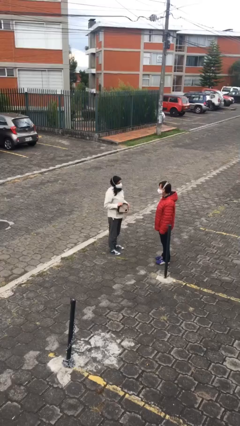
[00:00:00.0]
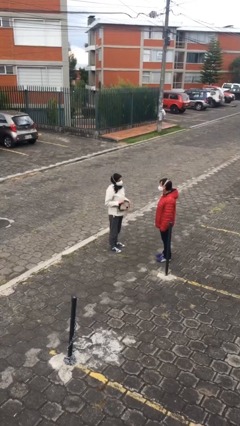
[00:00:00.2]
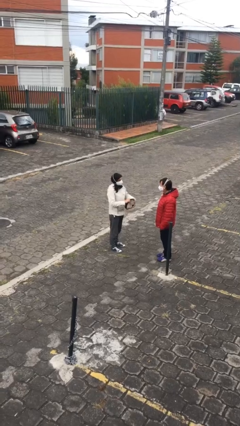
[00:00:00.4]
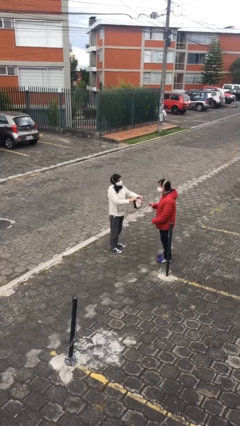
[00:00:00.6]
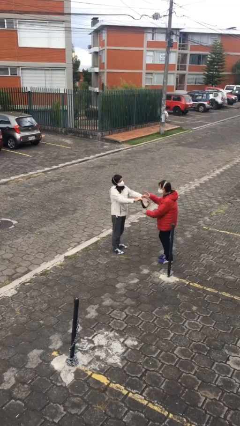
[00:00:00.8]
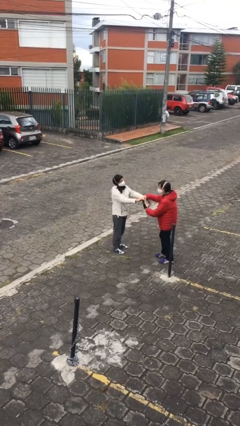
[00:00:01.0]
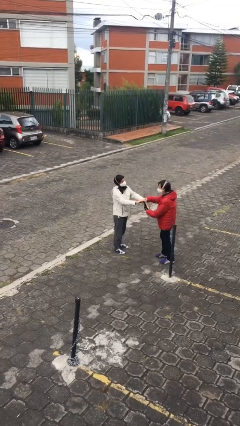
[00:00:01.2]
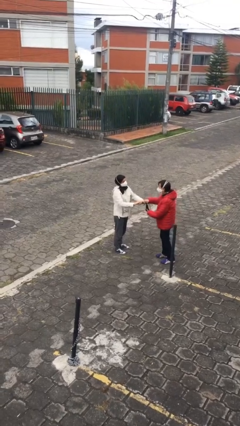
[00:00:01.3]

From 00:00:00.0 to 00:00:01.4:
person transfers object to person

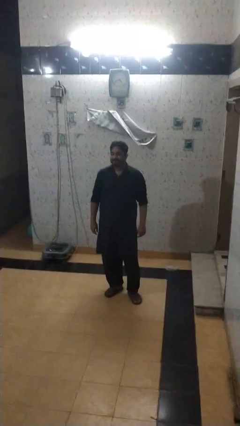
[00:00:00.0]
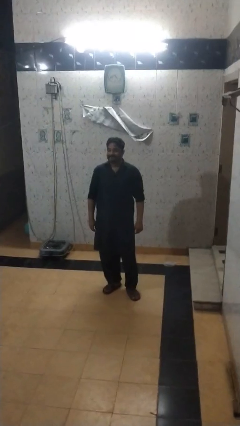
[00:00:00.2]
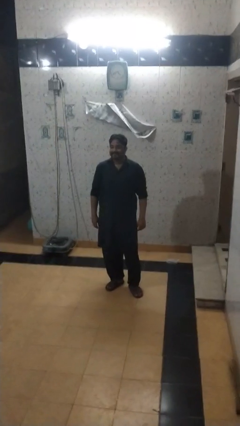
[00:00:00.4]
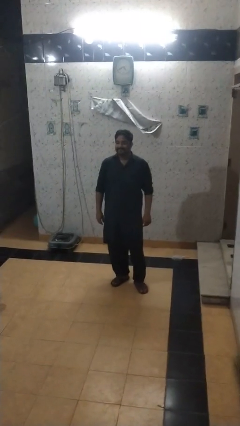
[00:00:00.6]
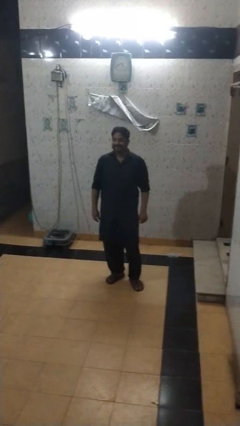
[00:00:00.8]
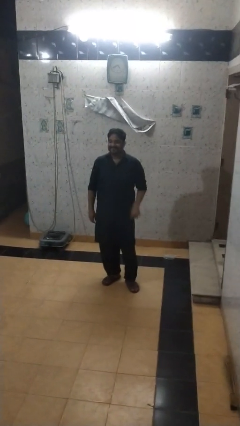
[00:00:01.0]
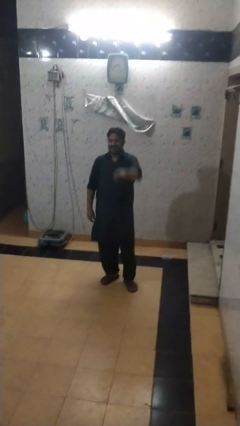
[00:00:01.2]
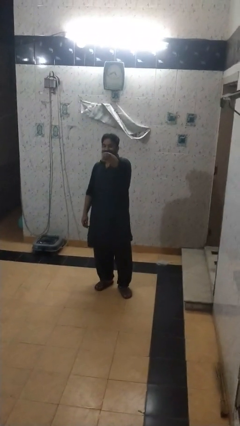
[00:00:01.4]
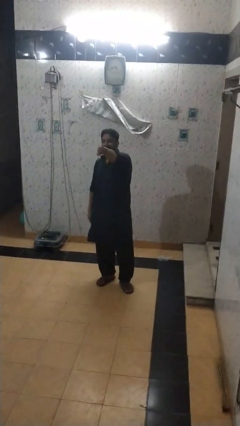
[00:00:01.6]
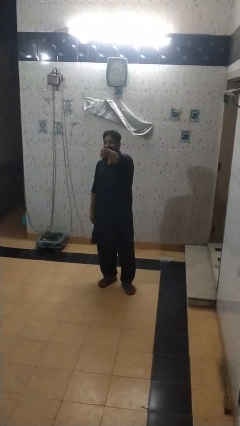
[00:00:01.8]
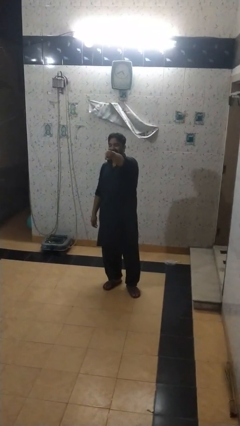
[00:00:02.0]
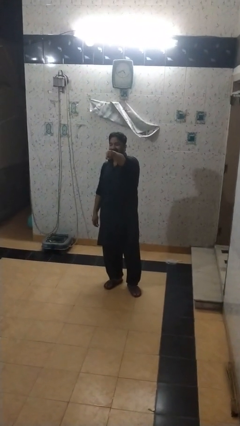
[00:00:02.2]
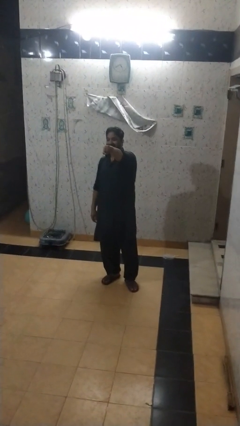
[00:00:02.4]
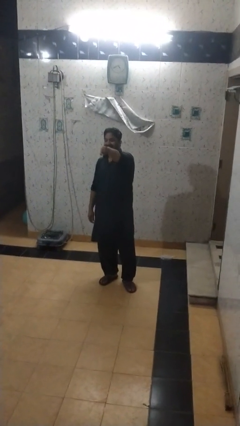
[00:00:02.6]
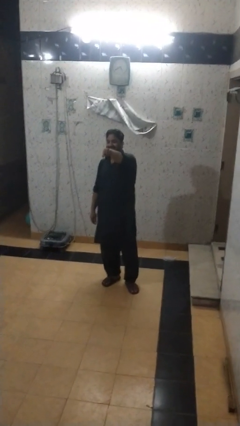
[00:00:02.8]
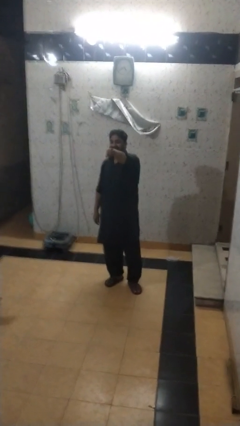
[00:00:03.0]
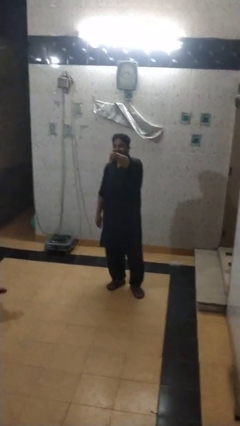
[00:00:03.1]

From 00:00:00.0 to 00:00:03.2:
person punches

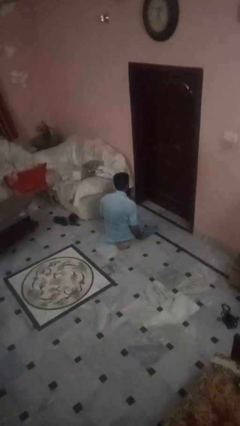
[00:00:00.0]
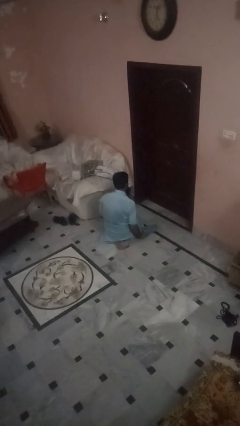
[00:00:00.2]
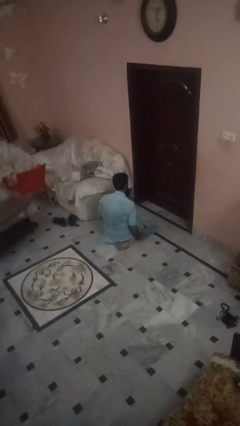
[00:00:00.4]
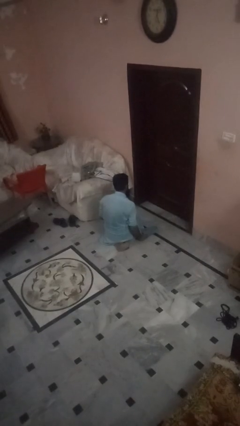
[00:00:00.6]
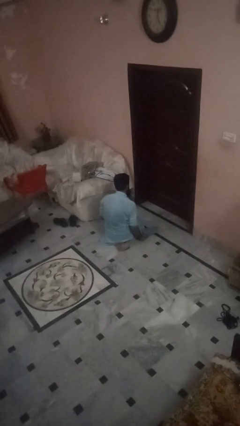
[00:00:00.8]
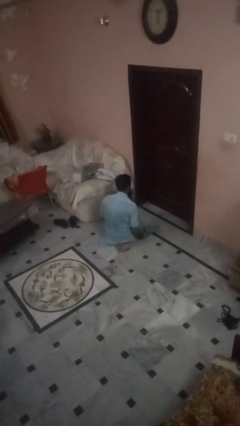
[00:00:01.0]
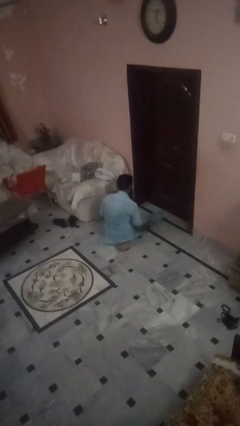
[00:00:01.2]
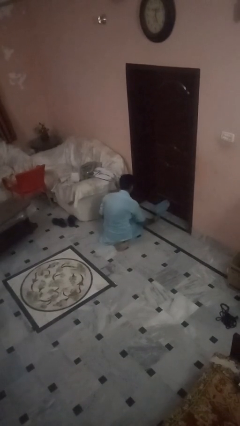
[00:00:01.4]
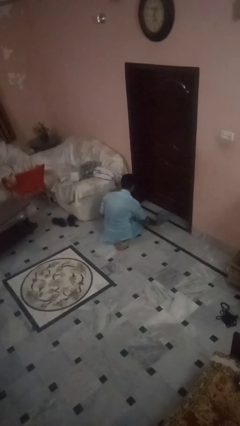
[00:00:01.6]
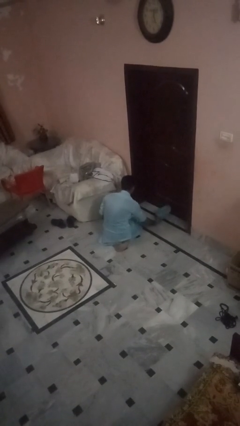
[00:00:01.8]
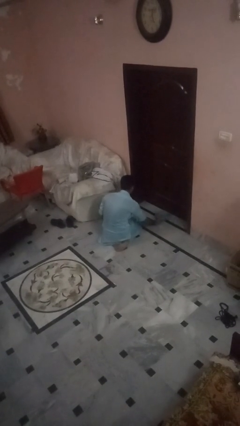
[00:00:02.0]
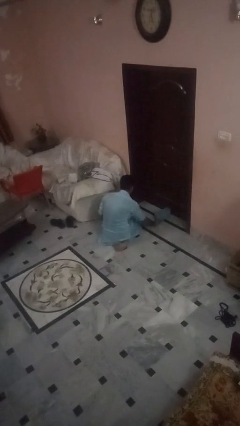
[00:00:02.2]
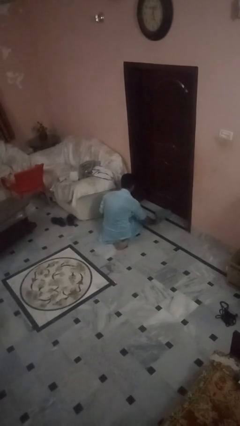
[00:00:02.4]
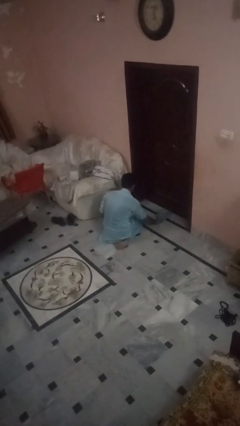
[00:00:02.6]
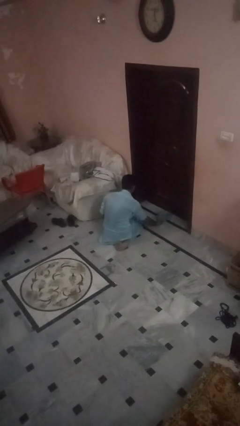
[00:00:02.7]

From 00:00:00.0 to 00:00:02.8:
person swats bug

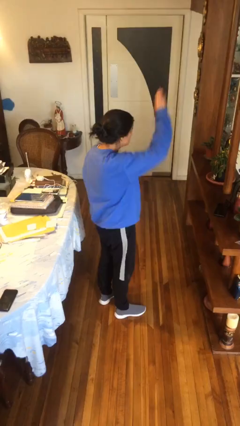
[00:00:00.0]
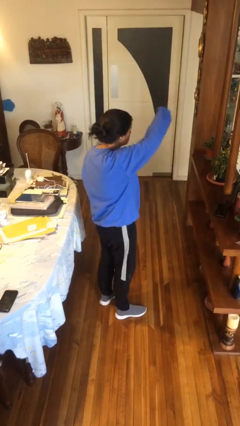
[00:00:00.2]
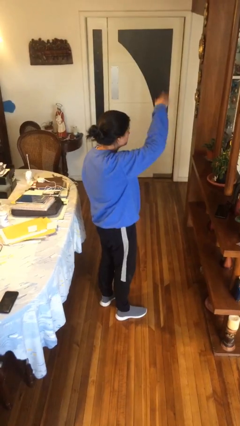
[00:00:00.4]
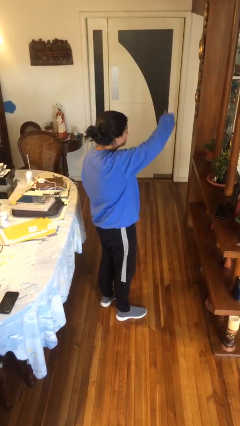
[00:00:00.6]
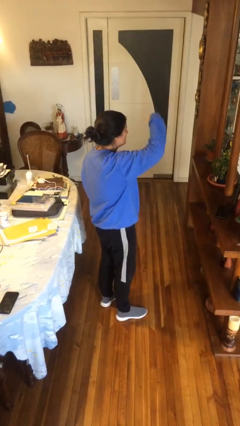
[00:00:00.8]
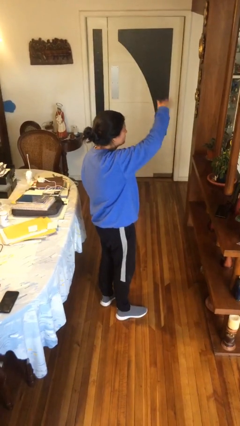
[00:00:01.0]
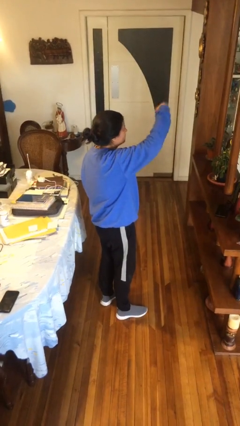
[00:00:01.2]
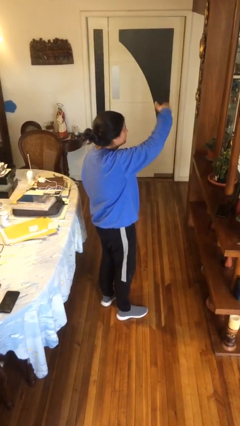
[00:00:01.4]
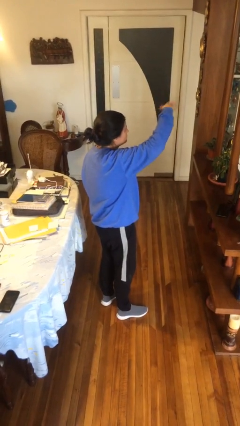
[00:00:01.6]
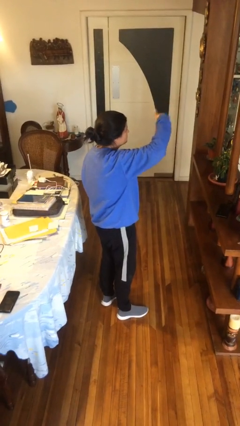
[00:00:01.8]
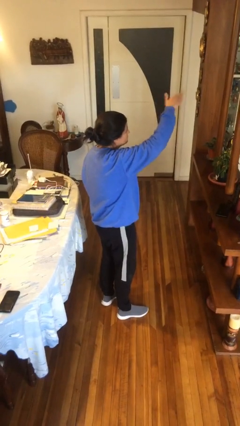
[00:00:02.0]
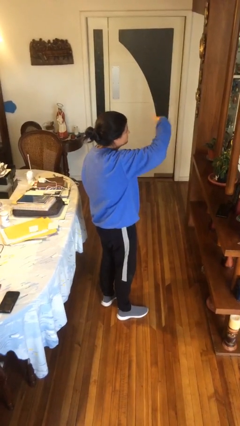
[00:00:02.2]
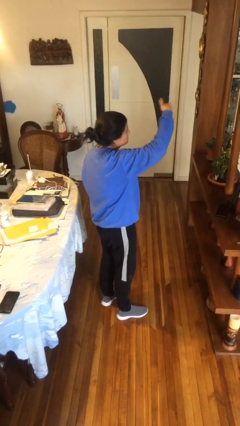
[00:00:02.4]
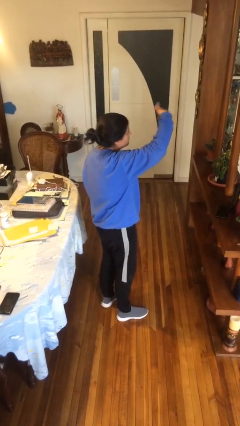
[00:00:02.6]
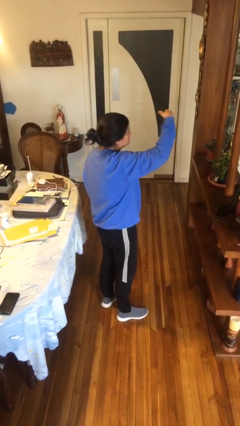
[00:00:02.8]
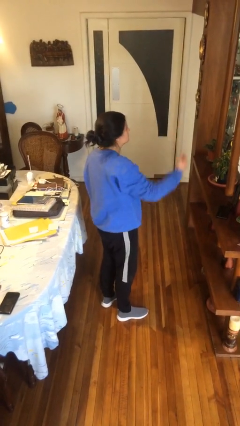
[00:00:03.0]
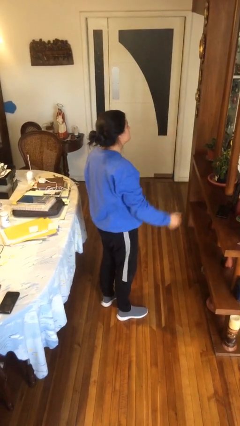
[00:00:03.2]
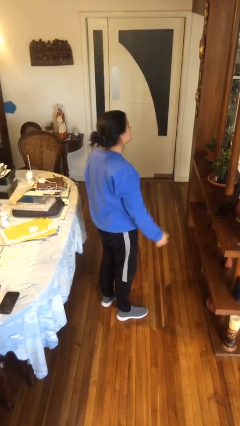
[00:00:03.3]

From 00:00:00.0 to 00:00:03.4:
person gestures come here

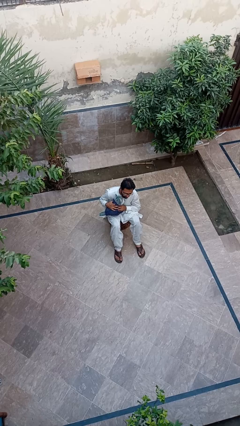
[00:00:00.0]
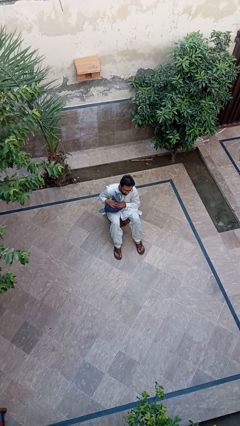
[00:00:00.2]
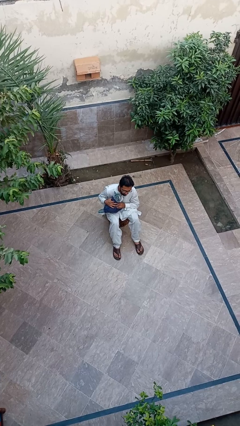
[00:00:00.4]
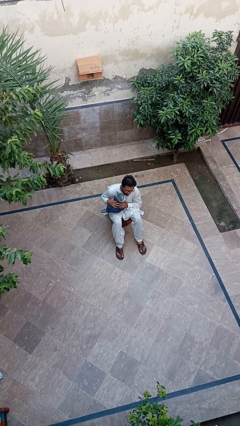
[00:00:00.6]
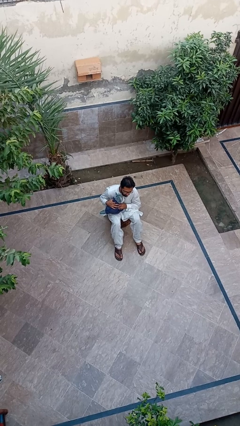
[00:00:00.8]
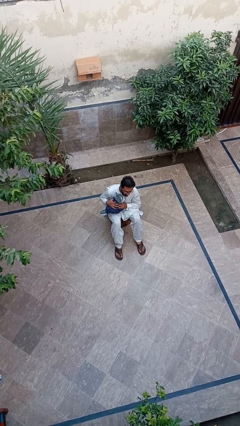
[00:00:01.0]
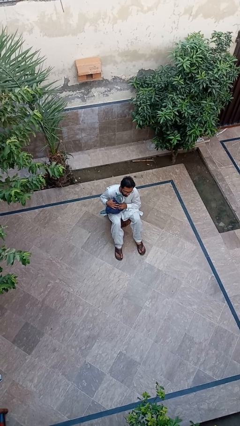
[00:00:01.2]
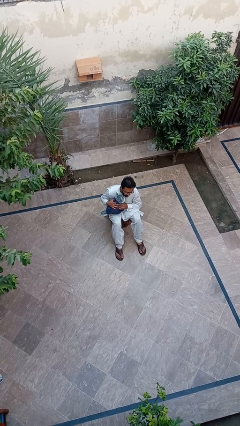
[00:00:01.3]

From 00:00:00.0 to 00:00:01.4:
person hugs cat

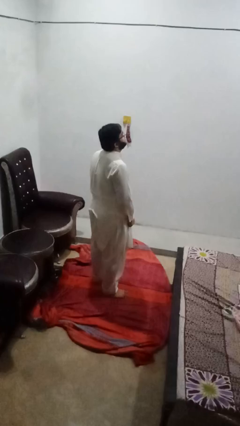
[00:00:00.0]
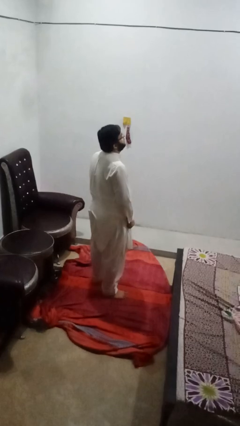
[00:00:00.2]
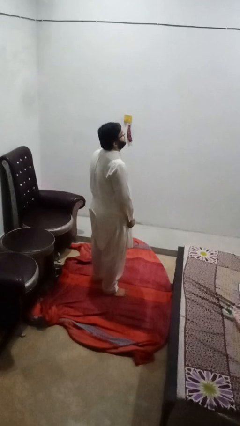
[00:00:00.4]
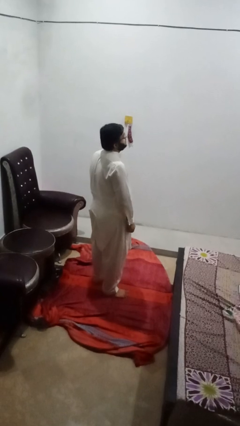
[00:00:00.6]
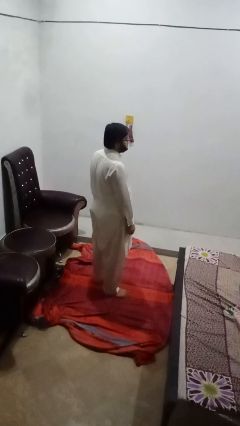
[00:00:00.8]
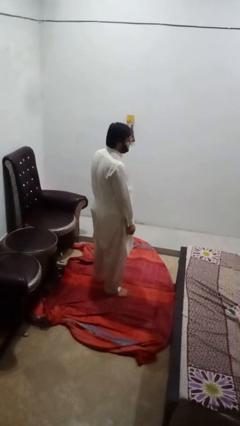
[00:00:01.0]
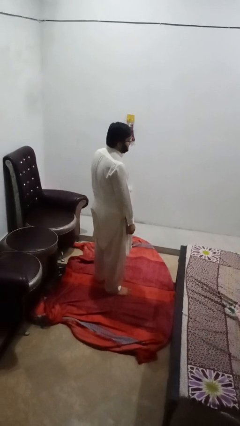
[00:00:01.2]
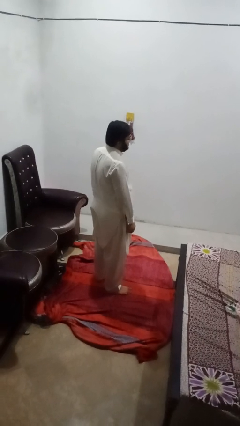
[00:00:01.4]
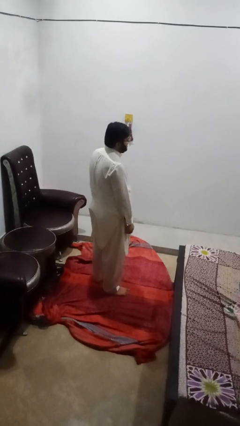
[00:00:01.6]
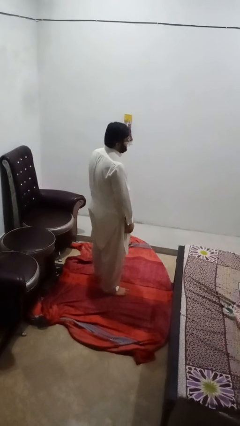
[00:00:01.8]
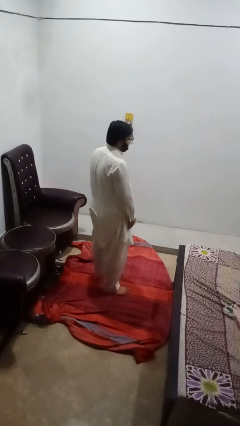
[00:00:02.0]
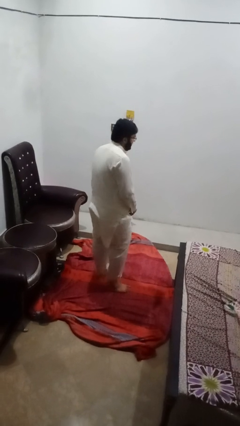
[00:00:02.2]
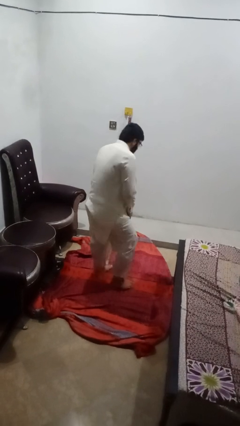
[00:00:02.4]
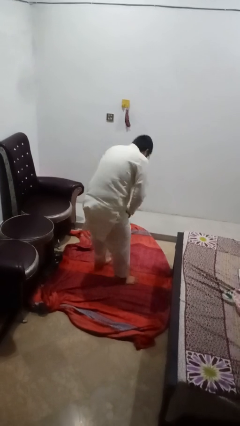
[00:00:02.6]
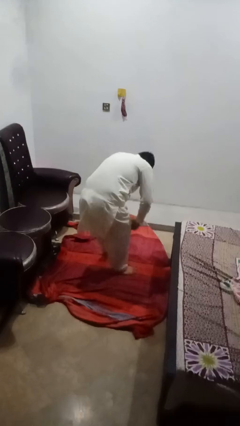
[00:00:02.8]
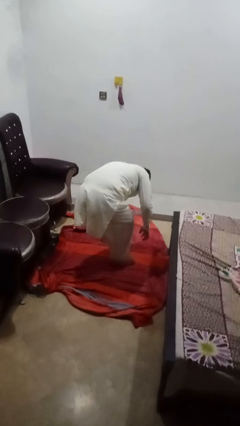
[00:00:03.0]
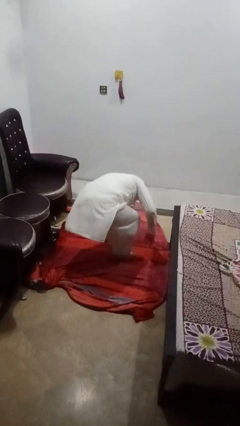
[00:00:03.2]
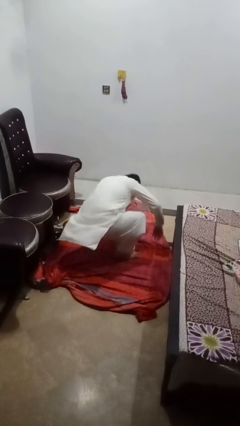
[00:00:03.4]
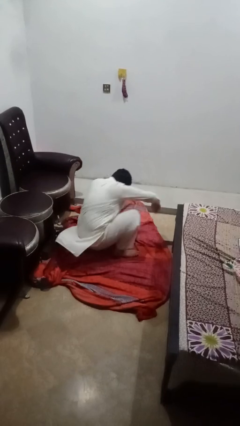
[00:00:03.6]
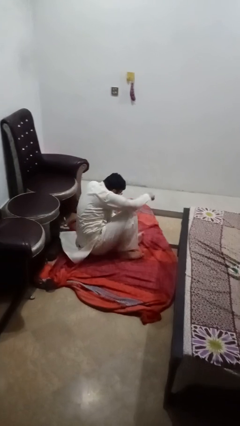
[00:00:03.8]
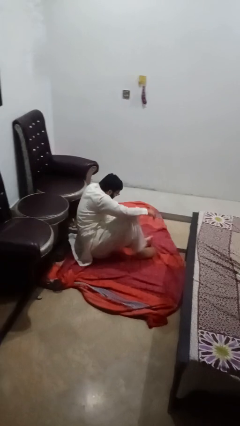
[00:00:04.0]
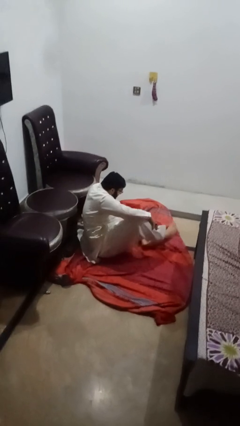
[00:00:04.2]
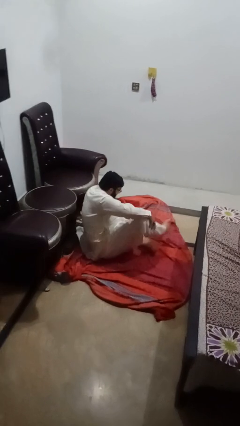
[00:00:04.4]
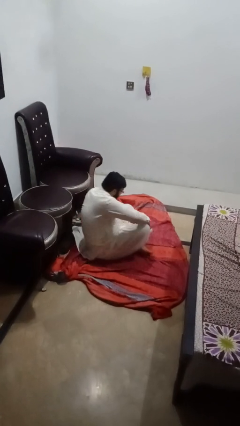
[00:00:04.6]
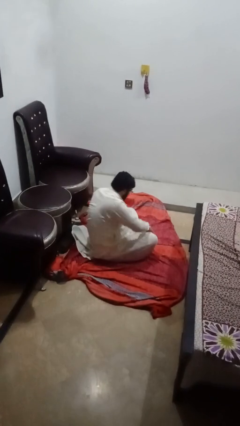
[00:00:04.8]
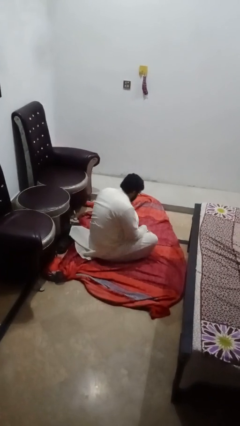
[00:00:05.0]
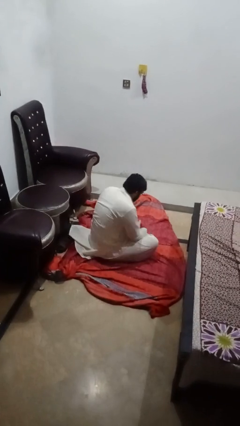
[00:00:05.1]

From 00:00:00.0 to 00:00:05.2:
person sits crisscross
